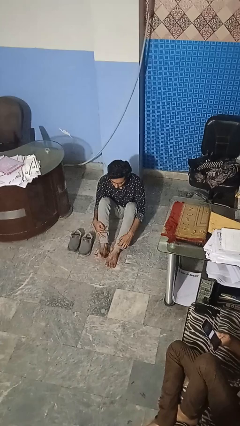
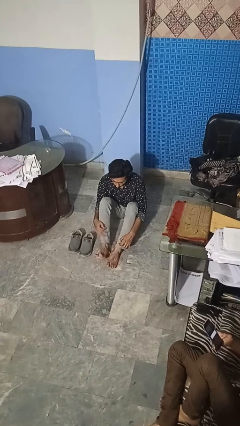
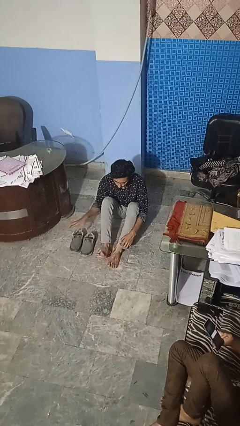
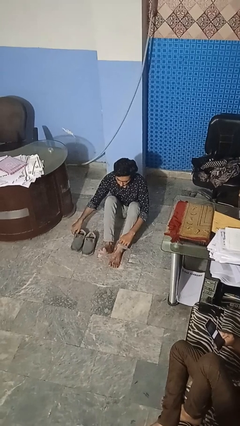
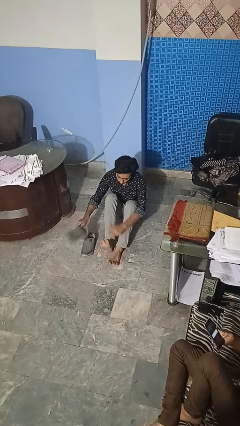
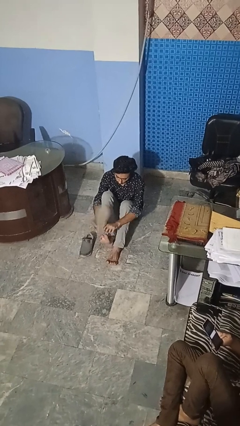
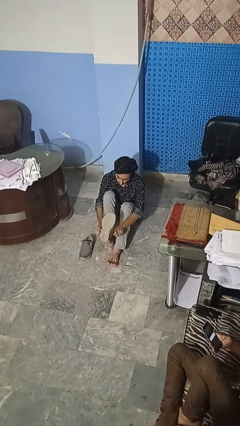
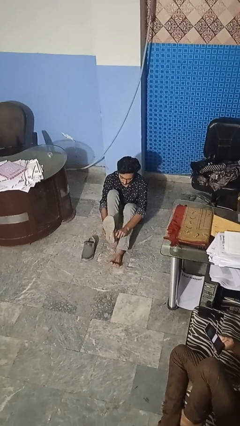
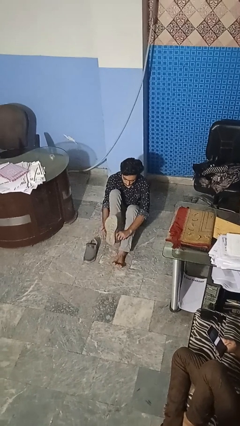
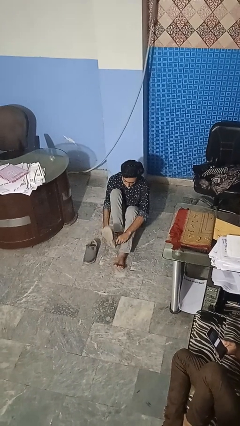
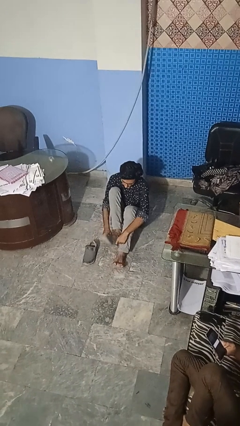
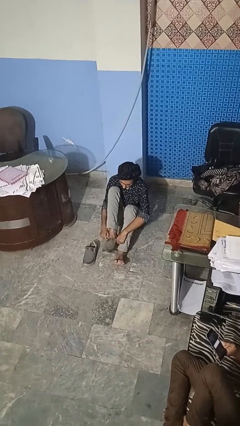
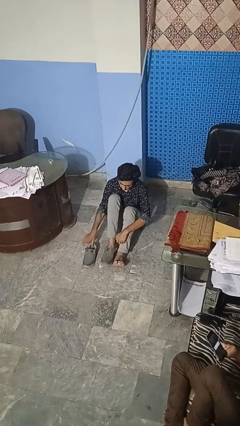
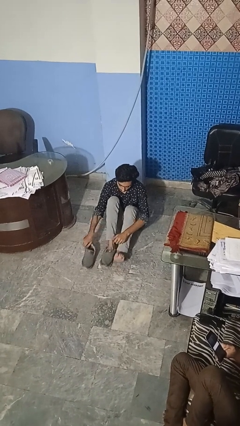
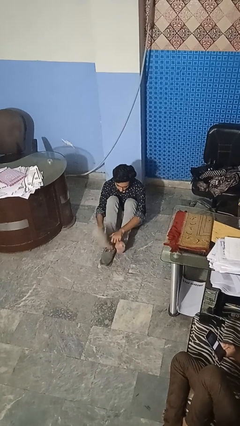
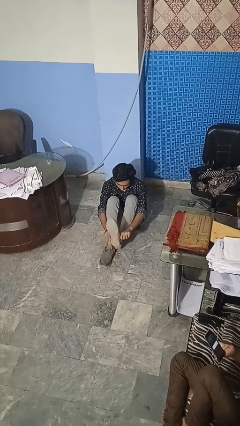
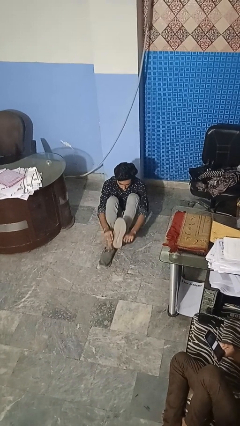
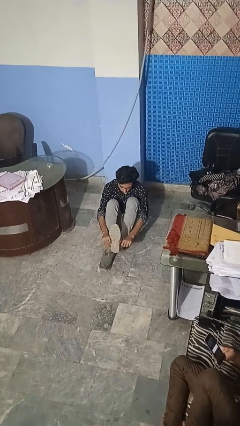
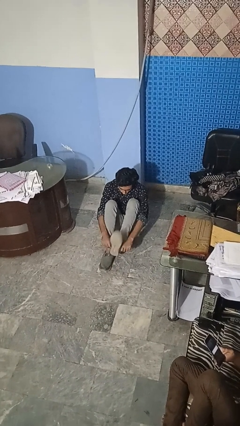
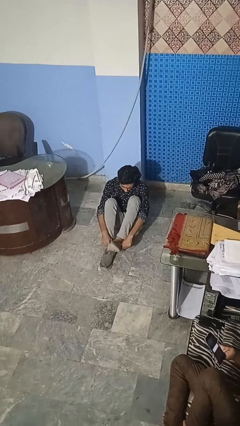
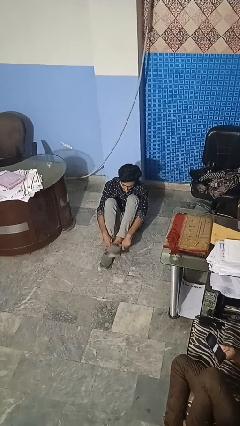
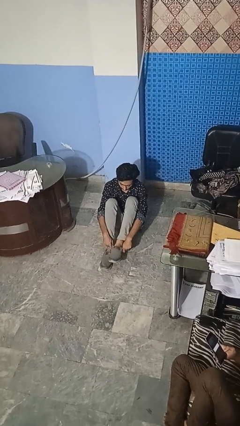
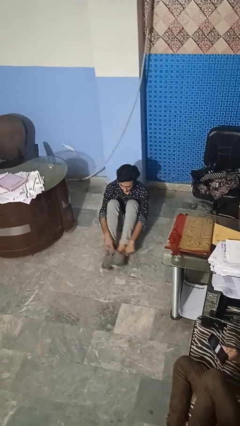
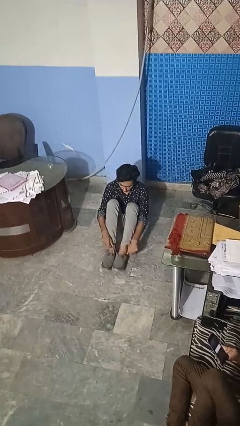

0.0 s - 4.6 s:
person puts on shoes

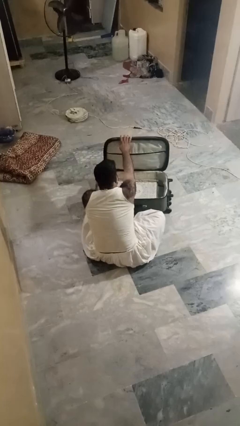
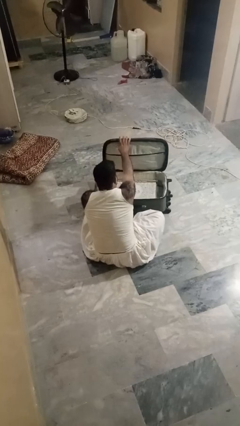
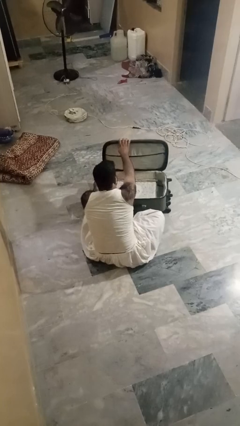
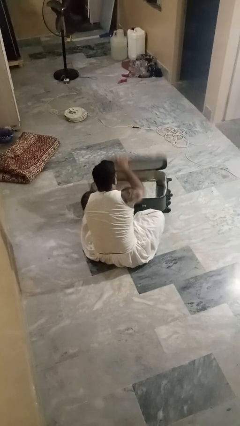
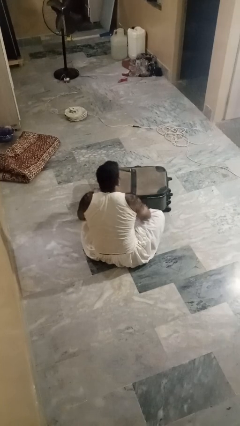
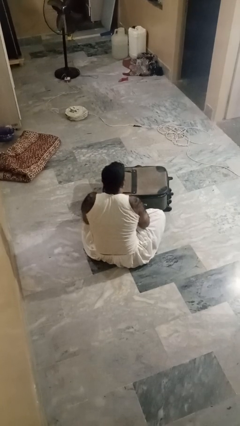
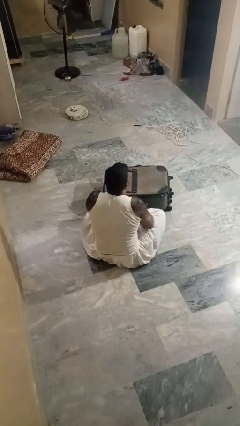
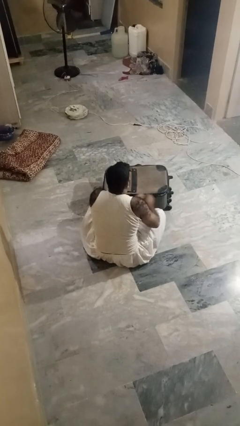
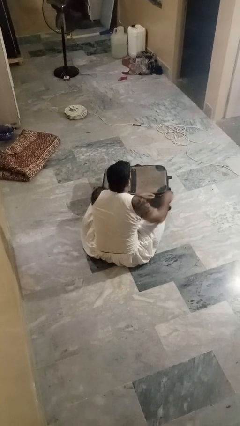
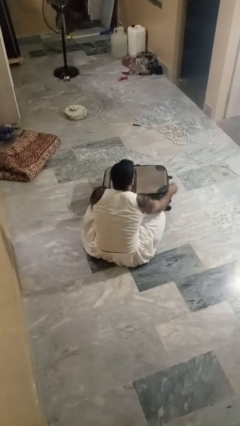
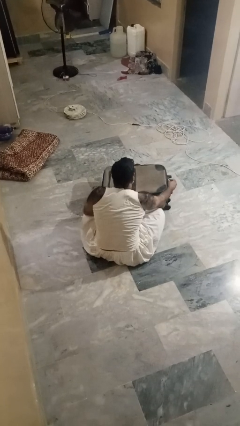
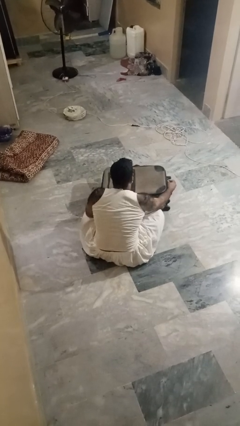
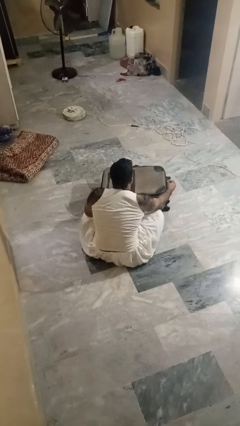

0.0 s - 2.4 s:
person closes suitcase

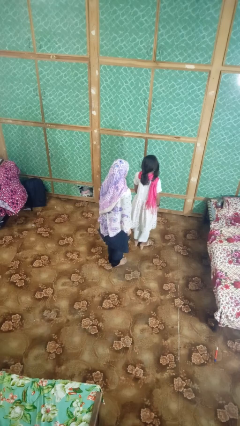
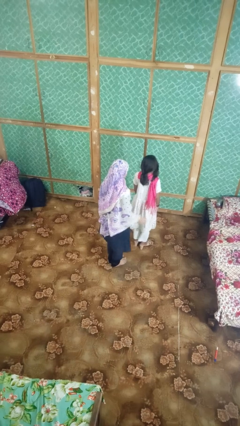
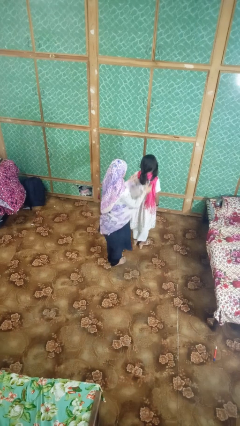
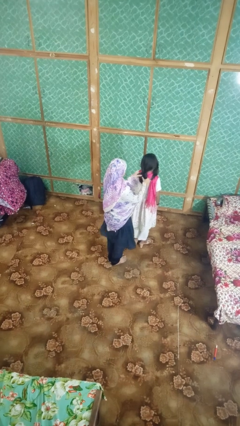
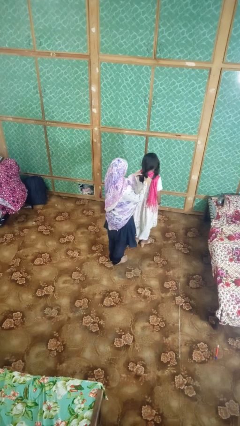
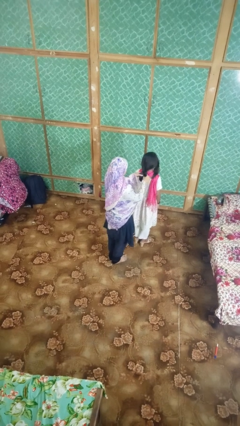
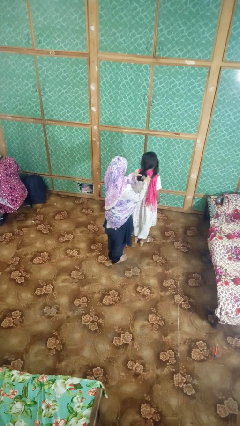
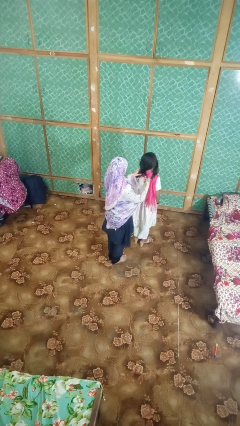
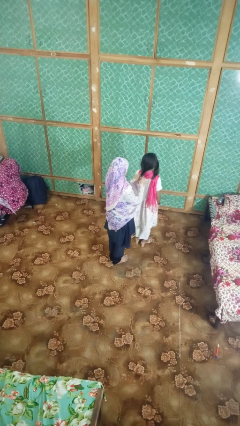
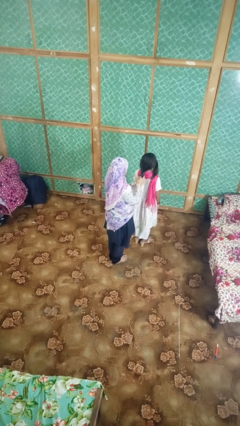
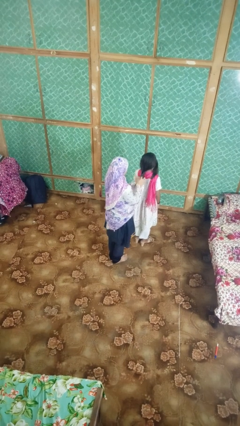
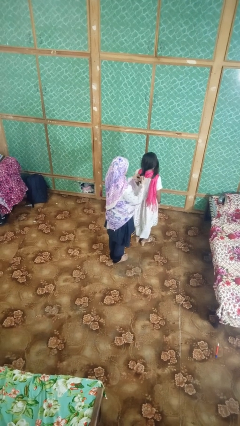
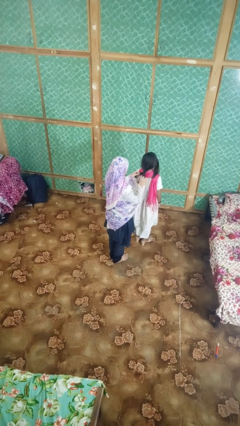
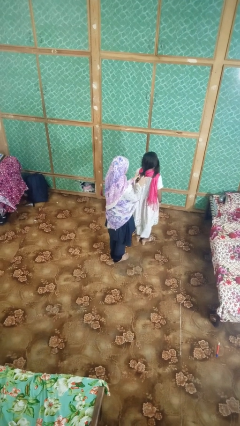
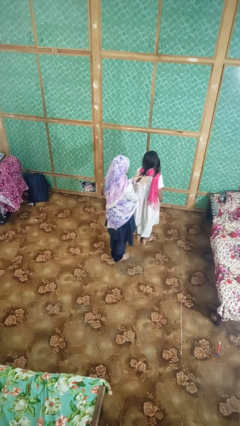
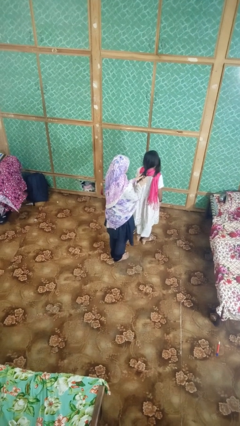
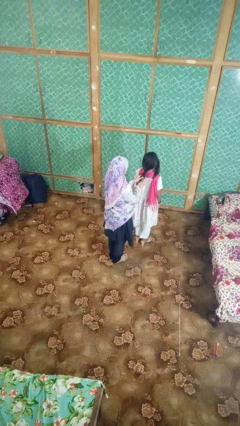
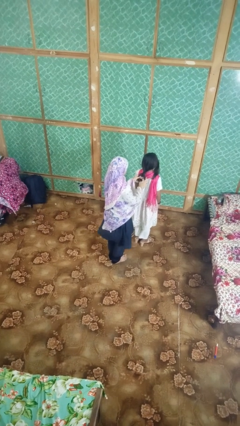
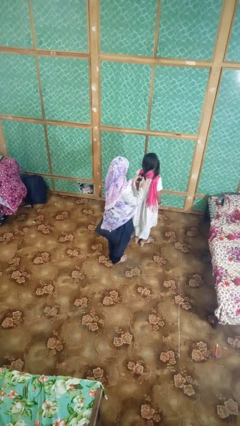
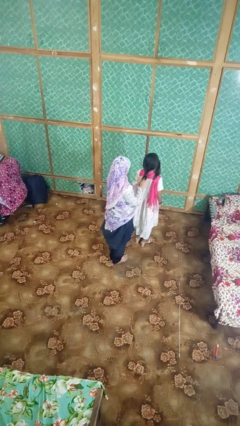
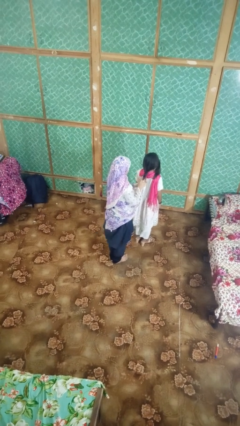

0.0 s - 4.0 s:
person braids hair of person

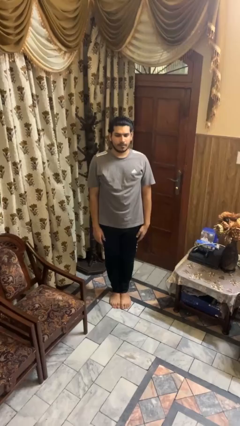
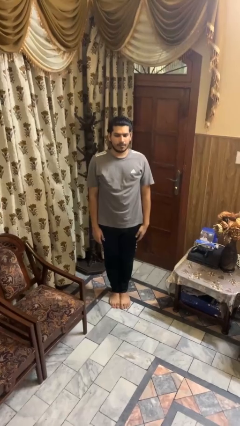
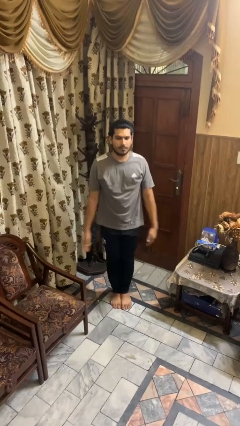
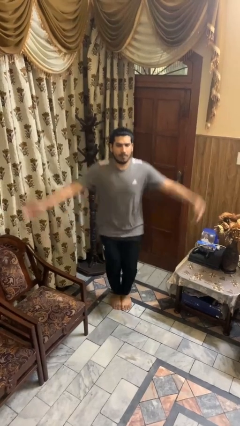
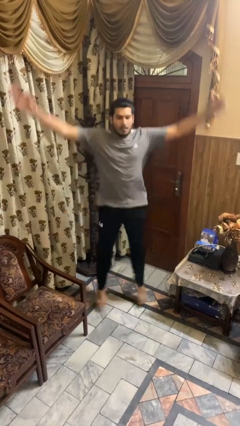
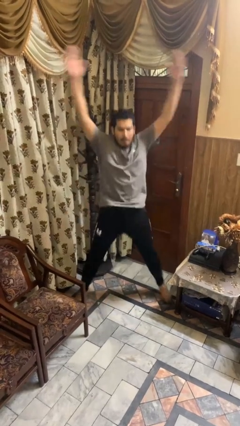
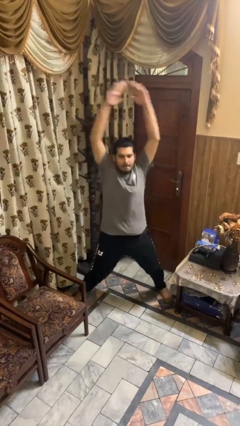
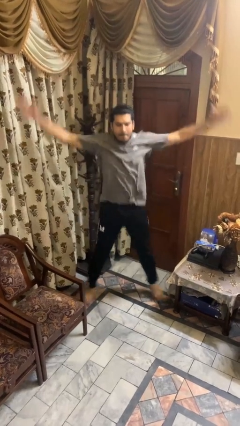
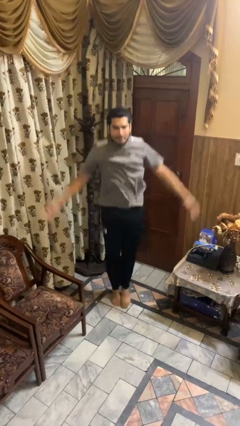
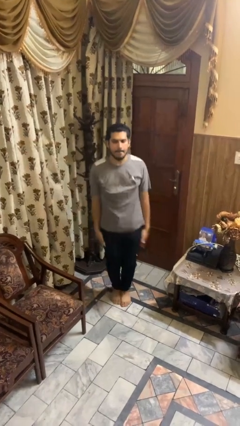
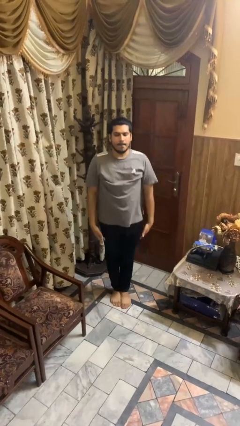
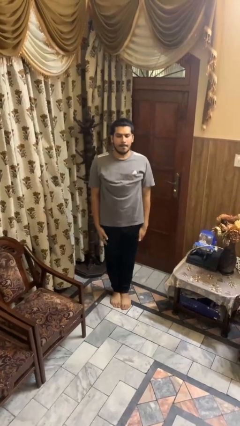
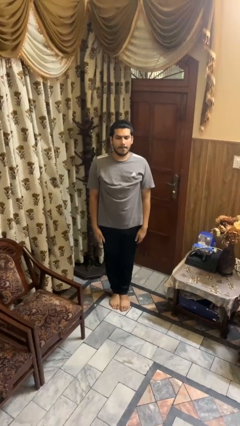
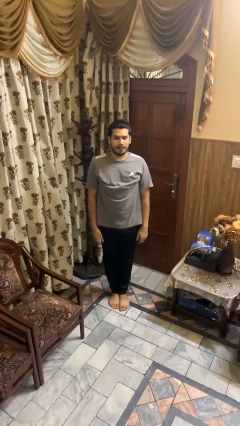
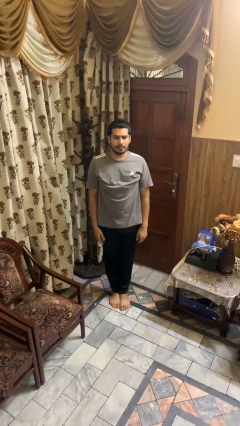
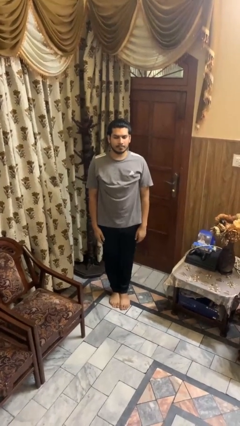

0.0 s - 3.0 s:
person exercises with jumping jacks

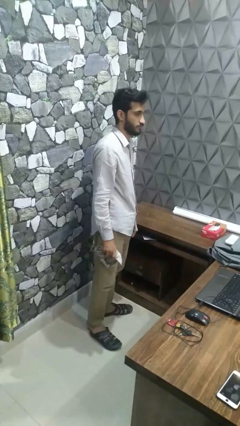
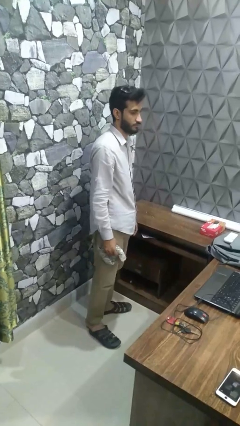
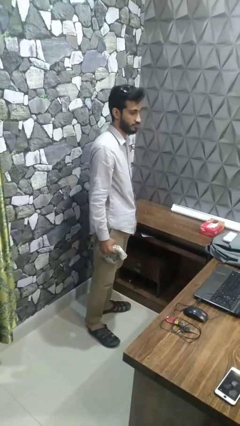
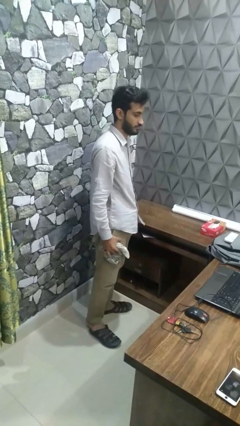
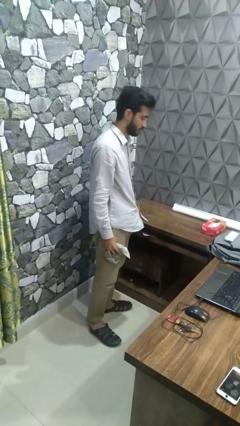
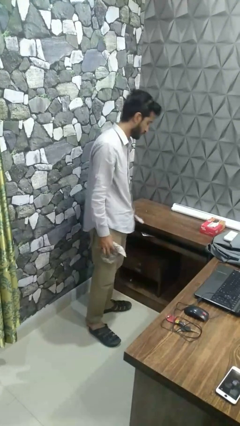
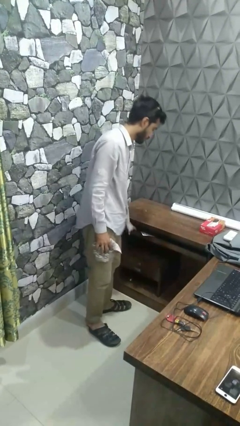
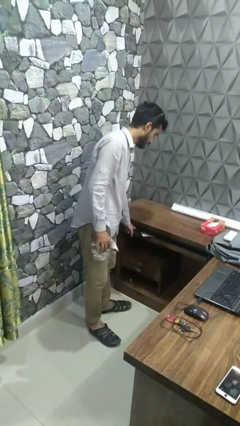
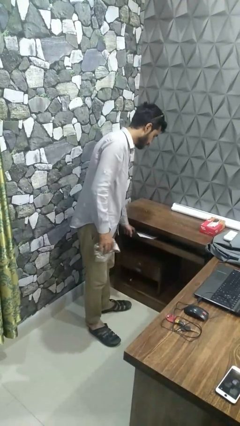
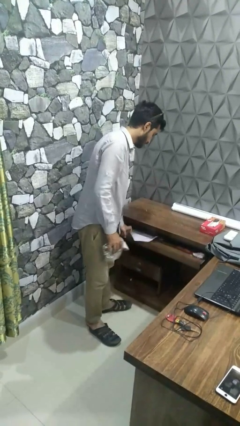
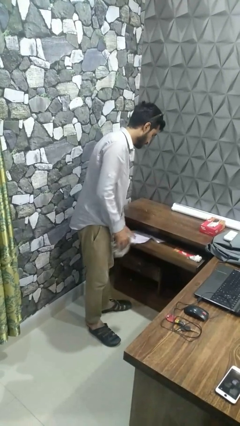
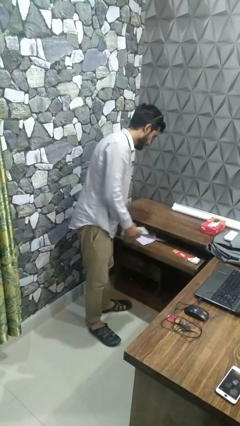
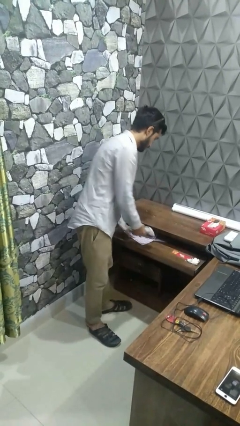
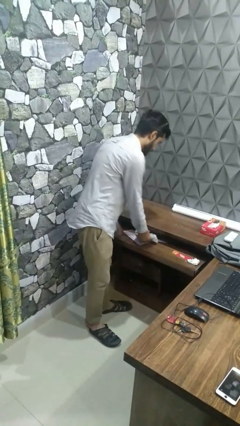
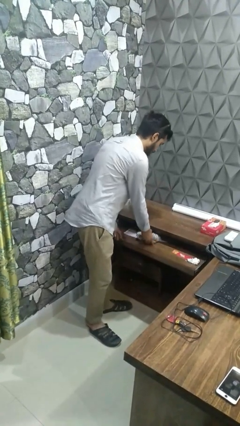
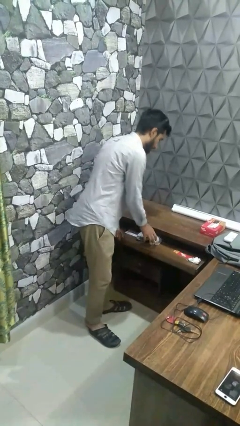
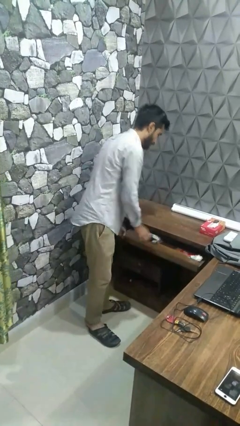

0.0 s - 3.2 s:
person puts clothes into dresser
